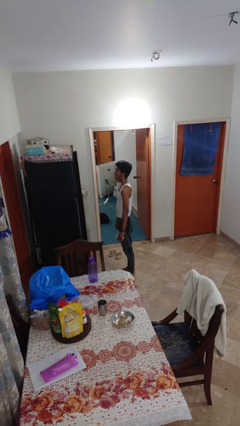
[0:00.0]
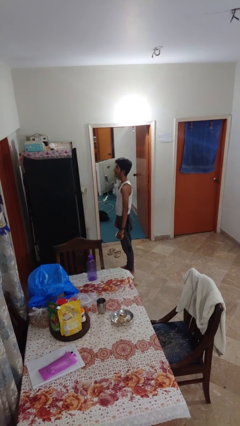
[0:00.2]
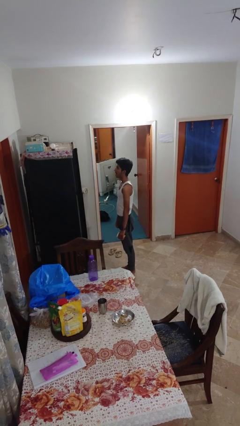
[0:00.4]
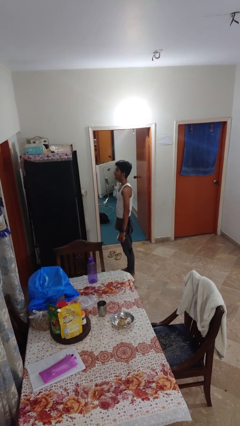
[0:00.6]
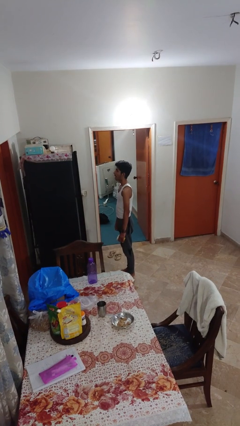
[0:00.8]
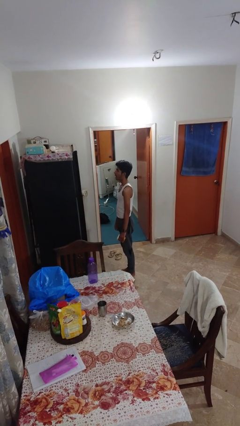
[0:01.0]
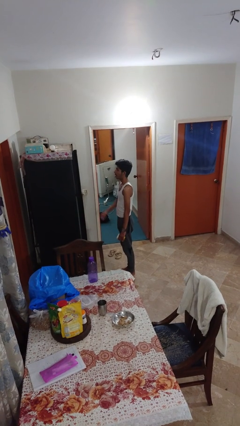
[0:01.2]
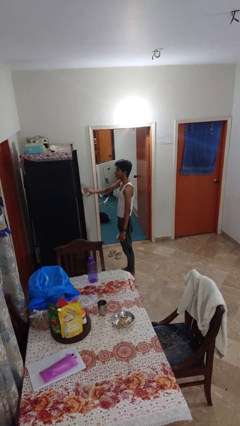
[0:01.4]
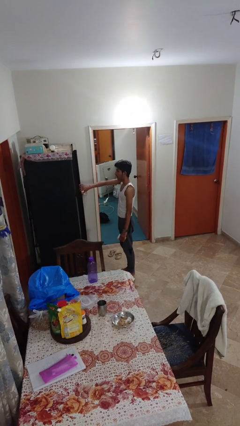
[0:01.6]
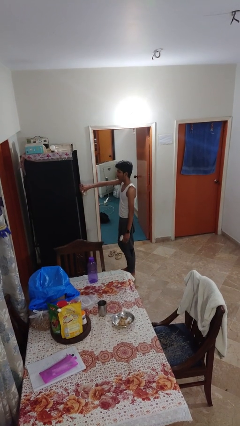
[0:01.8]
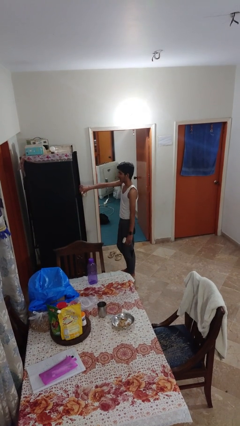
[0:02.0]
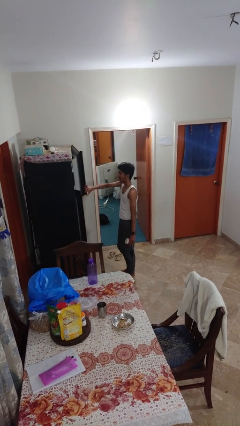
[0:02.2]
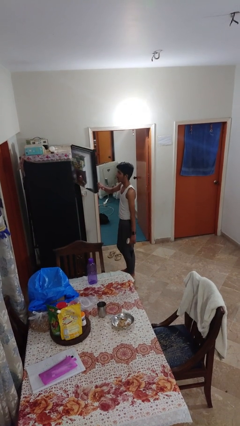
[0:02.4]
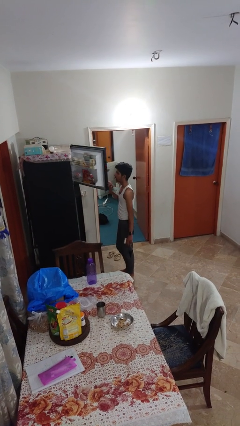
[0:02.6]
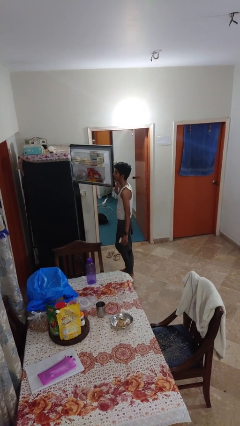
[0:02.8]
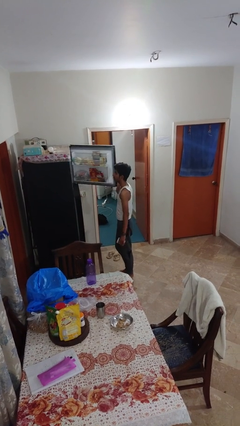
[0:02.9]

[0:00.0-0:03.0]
person opens refrigerator

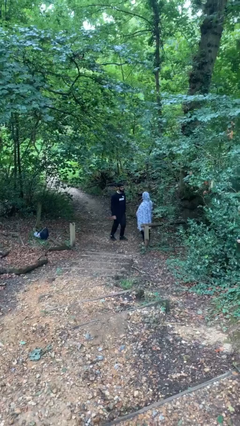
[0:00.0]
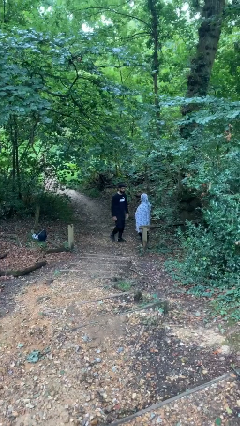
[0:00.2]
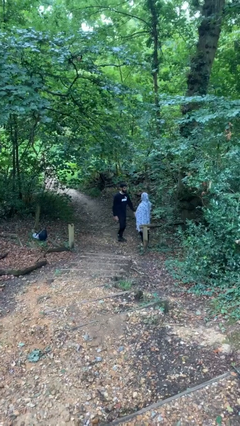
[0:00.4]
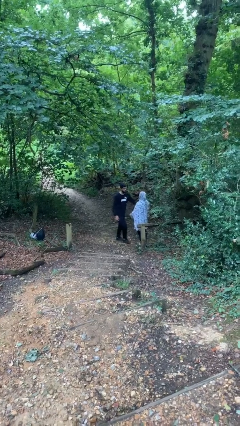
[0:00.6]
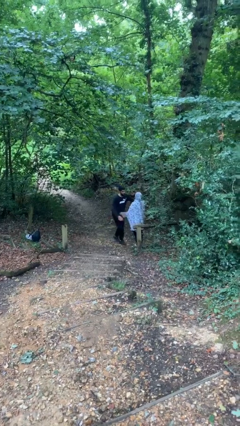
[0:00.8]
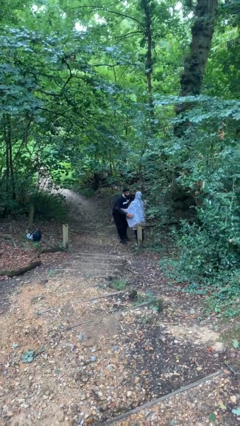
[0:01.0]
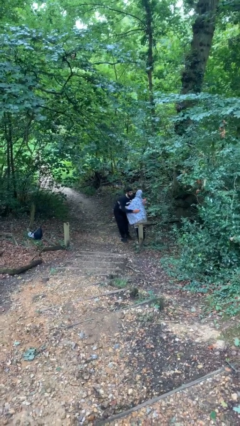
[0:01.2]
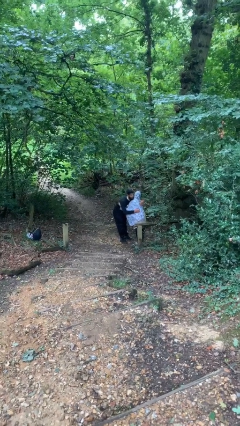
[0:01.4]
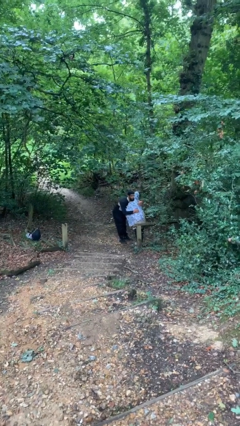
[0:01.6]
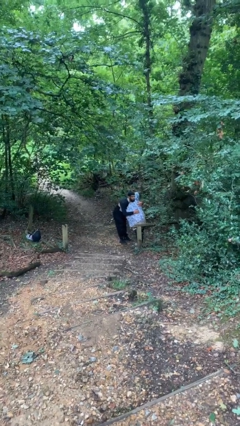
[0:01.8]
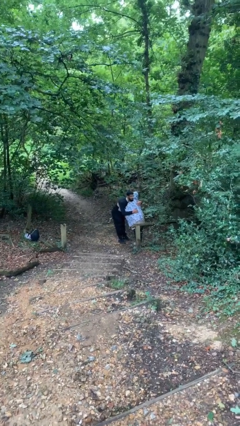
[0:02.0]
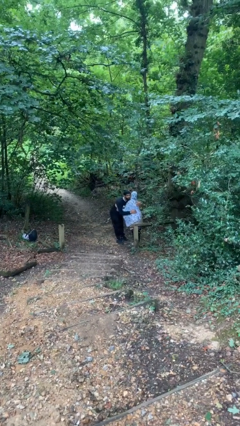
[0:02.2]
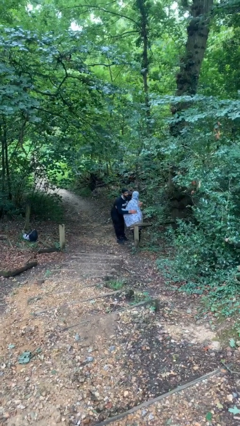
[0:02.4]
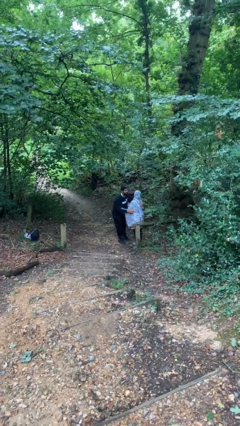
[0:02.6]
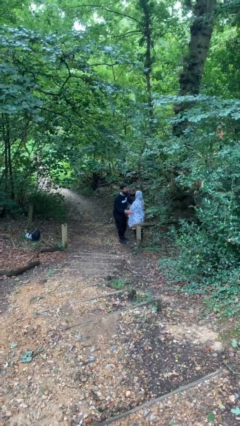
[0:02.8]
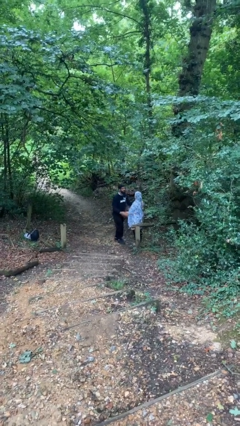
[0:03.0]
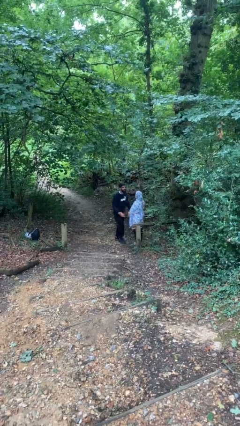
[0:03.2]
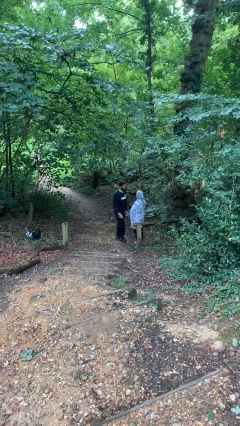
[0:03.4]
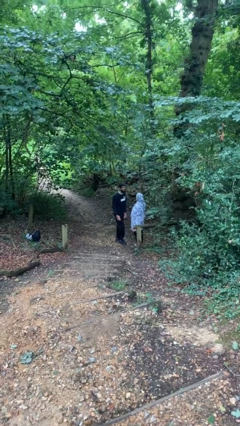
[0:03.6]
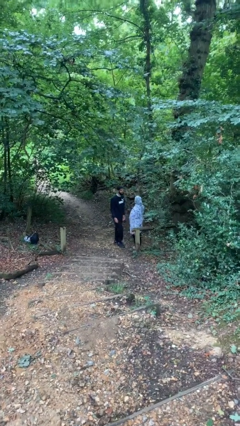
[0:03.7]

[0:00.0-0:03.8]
person embraces person

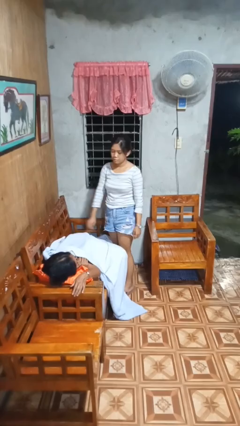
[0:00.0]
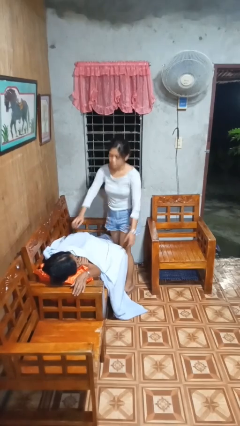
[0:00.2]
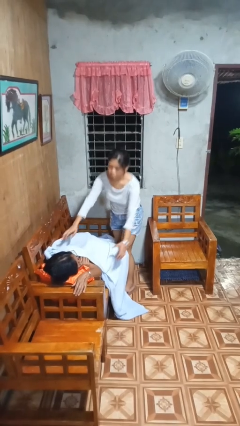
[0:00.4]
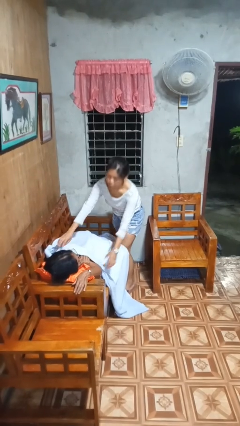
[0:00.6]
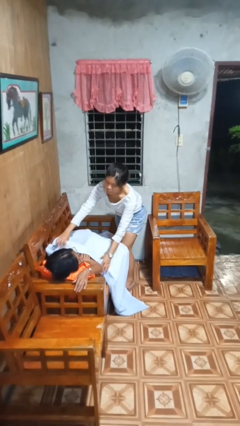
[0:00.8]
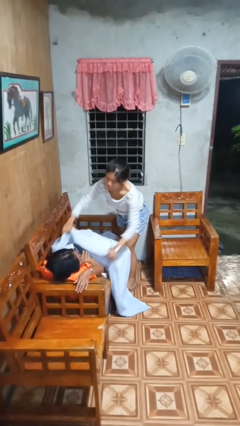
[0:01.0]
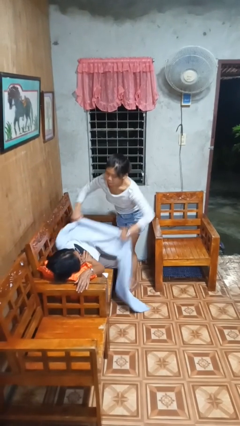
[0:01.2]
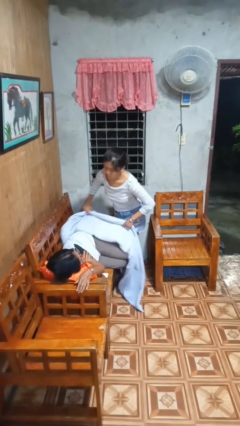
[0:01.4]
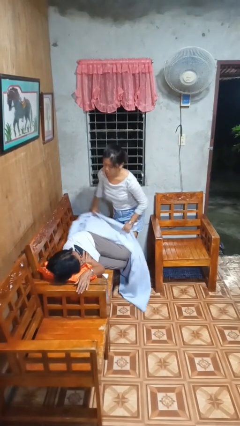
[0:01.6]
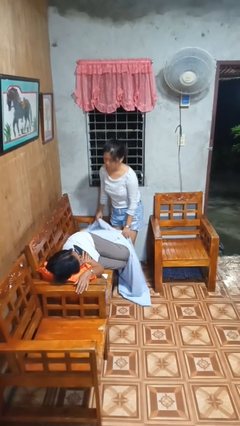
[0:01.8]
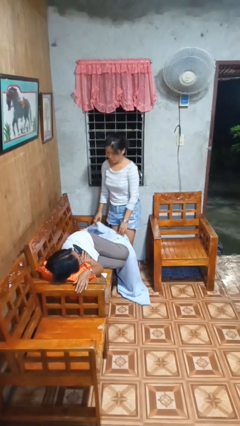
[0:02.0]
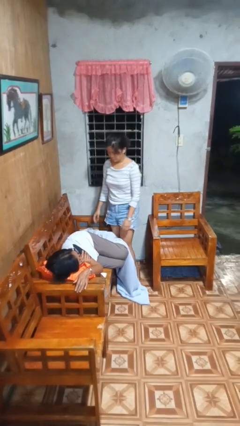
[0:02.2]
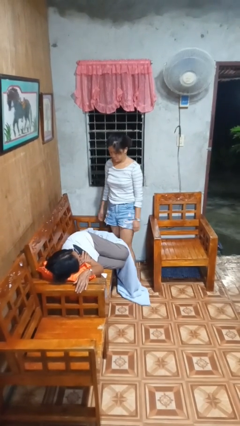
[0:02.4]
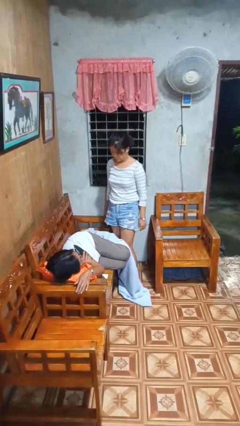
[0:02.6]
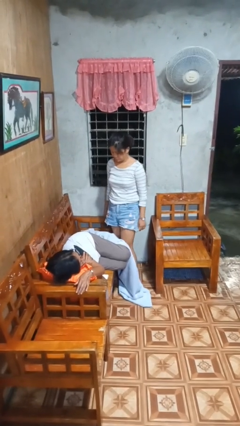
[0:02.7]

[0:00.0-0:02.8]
person uncovers friend with blanket

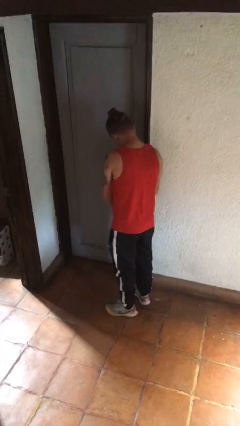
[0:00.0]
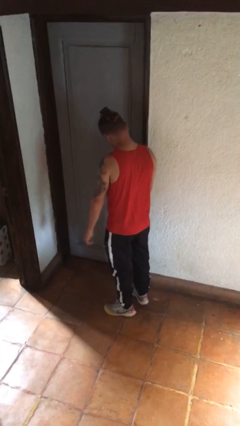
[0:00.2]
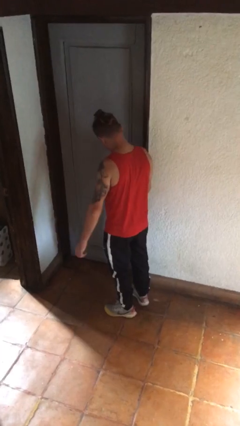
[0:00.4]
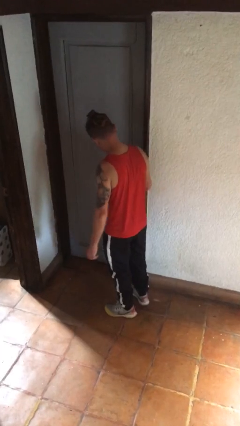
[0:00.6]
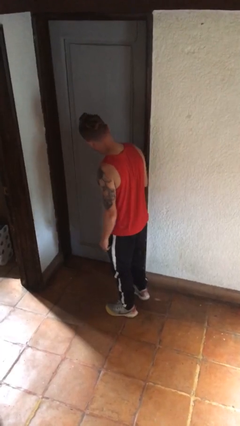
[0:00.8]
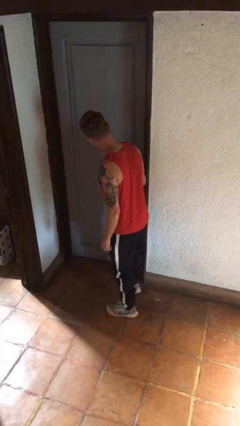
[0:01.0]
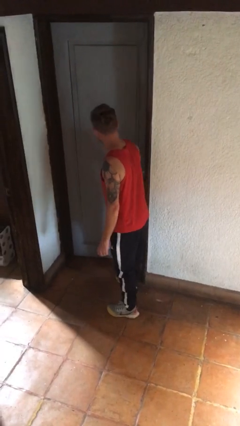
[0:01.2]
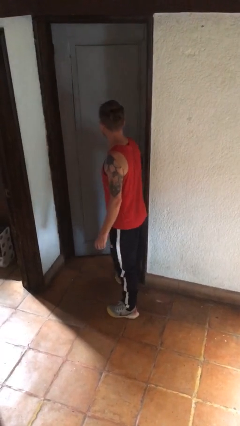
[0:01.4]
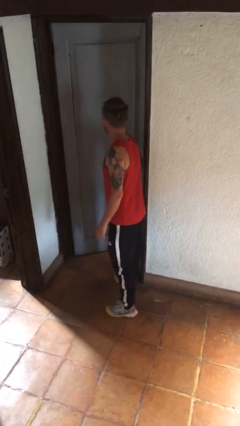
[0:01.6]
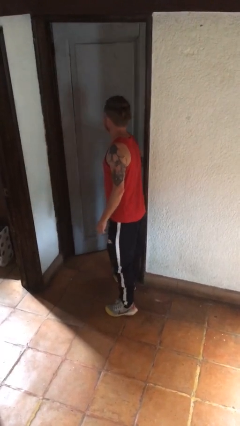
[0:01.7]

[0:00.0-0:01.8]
person opens facility door

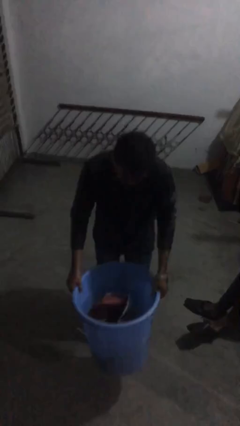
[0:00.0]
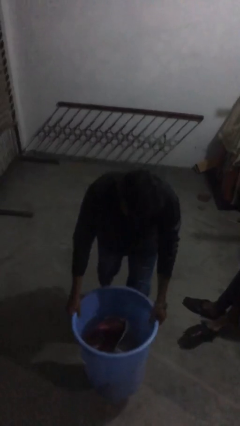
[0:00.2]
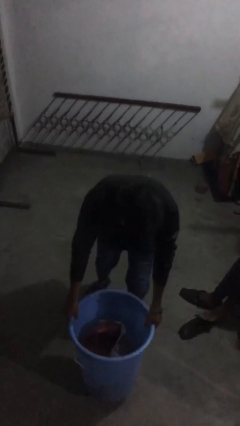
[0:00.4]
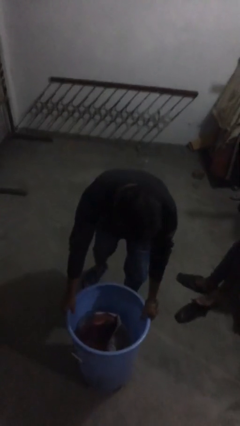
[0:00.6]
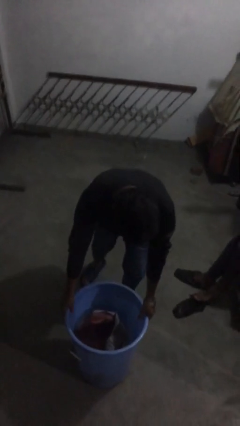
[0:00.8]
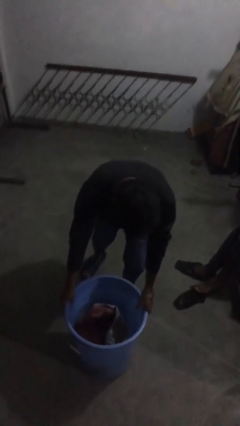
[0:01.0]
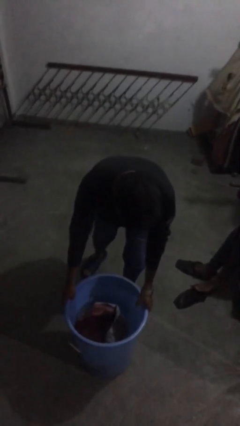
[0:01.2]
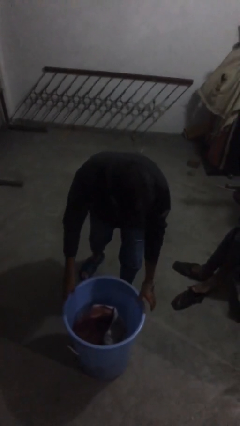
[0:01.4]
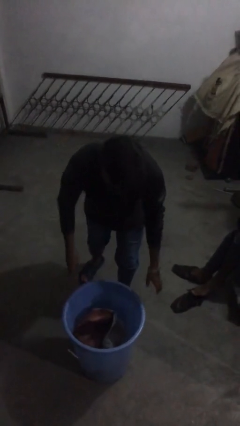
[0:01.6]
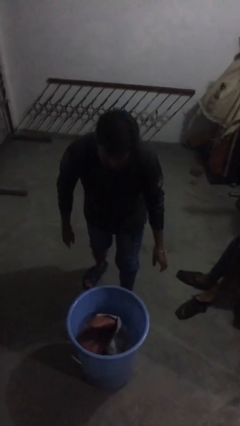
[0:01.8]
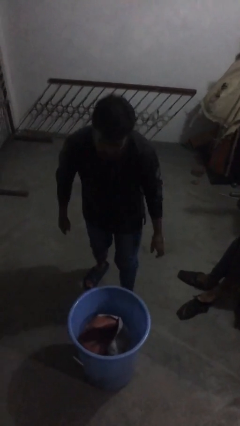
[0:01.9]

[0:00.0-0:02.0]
person puts down object on floor

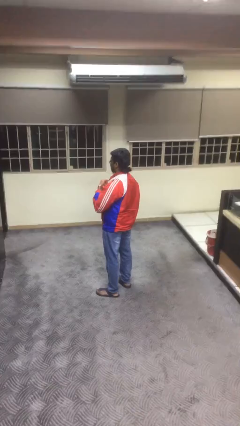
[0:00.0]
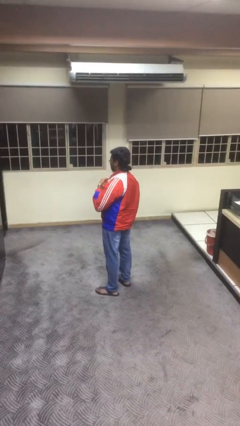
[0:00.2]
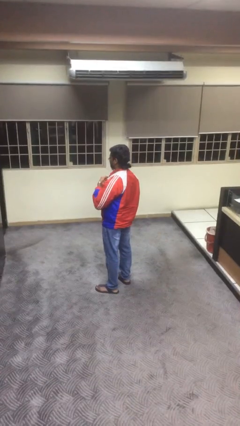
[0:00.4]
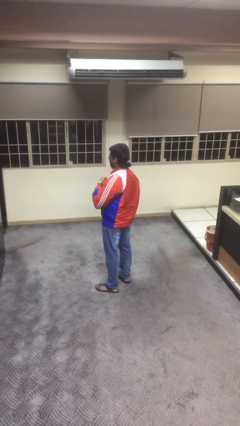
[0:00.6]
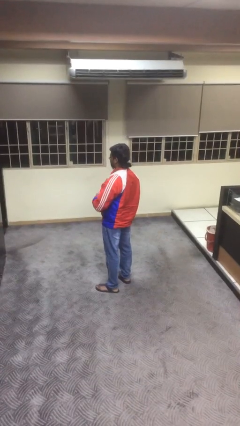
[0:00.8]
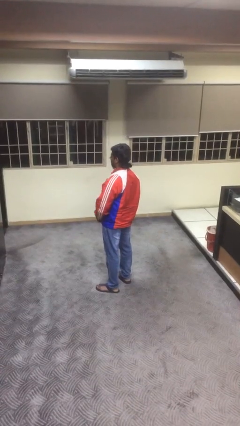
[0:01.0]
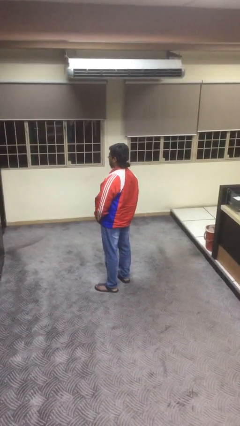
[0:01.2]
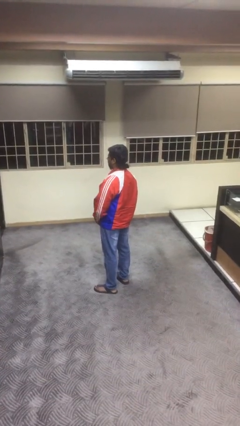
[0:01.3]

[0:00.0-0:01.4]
person unzips jacket

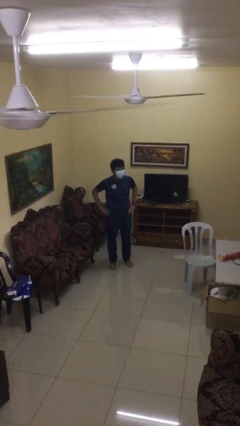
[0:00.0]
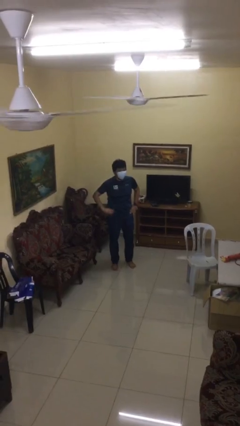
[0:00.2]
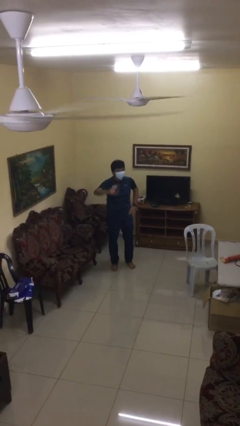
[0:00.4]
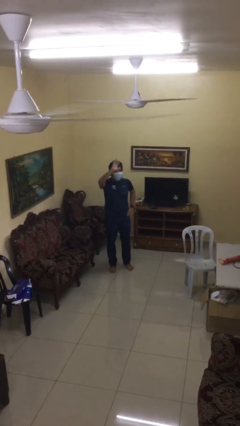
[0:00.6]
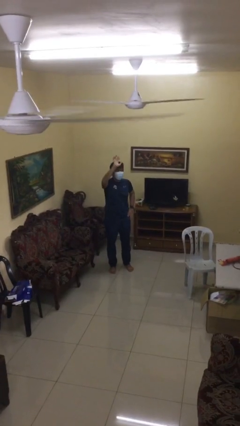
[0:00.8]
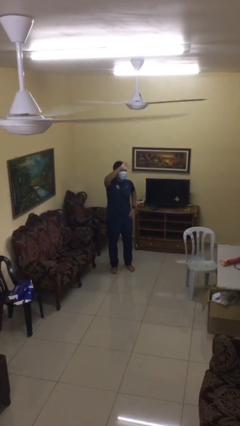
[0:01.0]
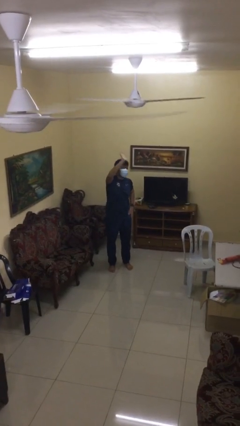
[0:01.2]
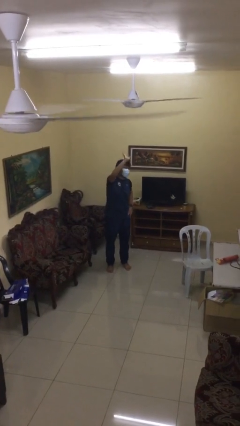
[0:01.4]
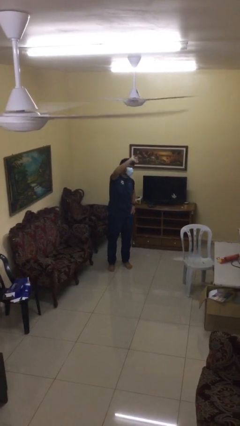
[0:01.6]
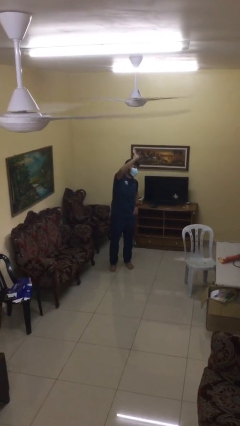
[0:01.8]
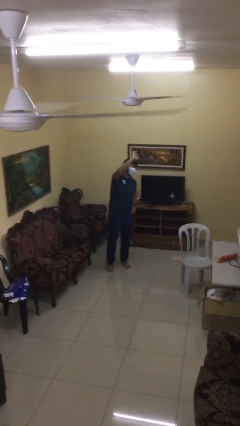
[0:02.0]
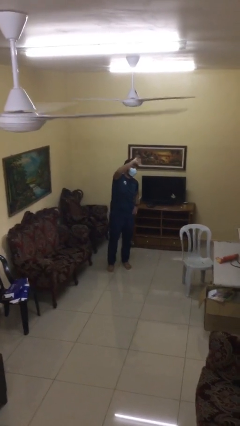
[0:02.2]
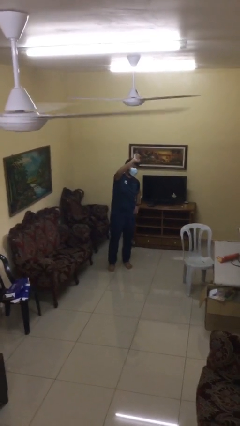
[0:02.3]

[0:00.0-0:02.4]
person waves at person
